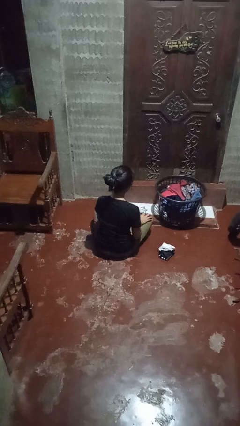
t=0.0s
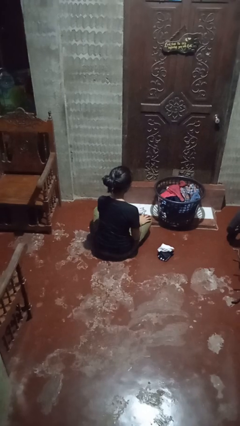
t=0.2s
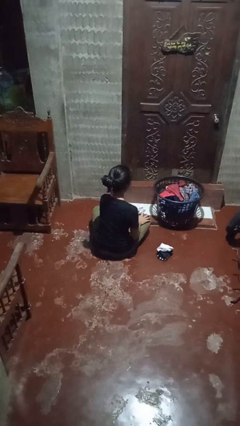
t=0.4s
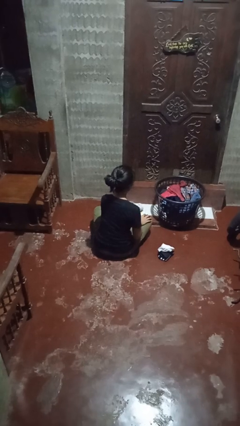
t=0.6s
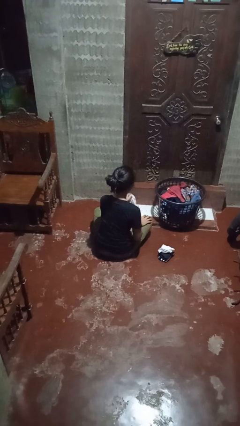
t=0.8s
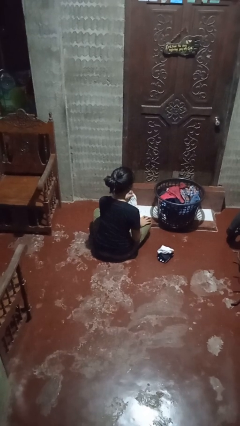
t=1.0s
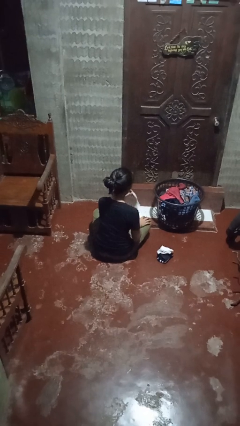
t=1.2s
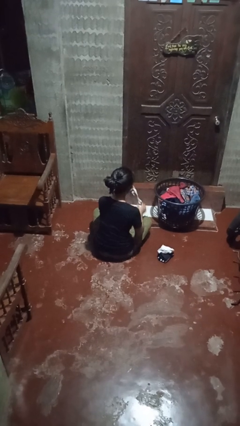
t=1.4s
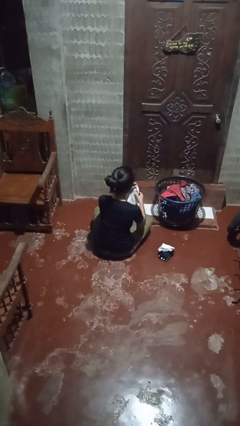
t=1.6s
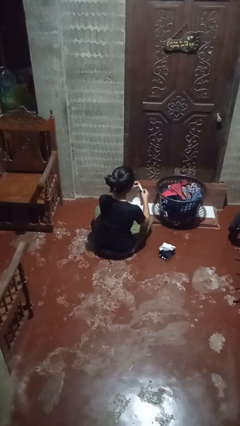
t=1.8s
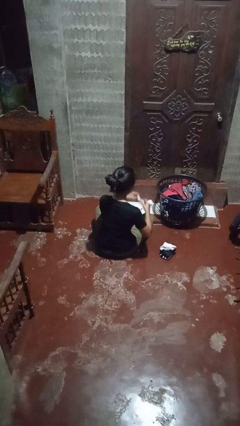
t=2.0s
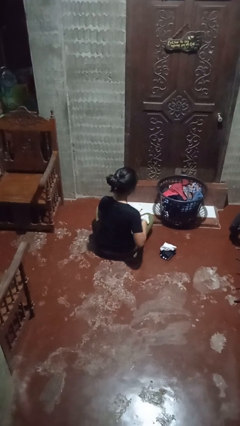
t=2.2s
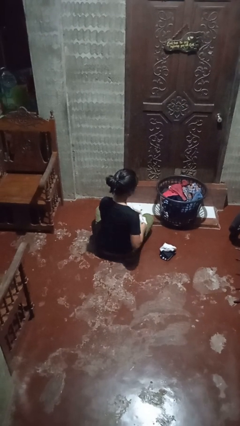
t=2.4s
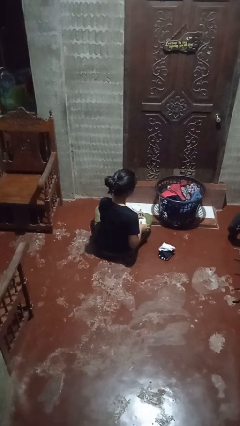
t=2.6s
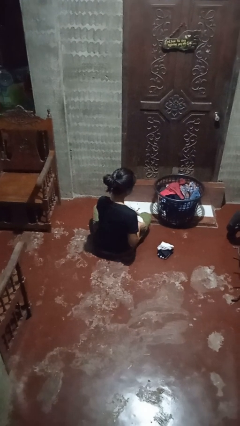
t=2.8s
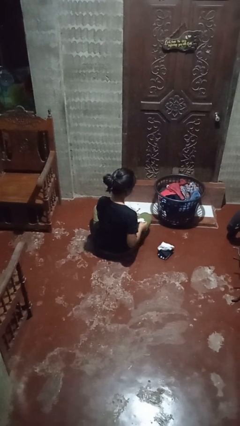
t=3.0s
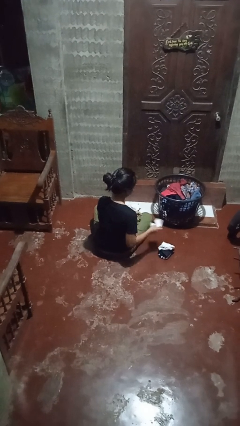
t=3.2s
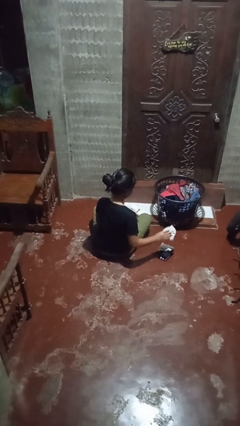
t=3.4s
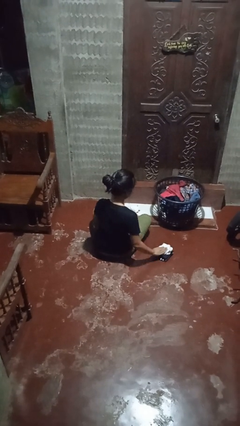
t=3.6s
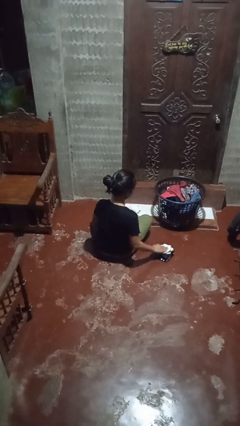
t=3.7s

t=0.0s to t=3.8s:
person folds socks

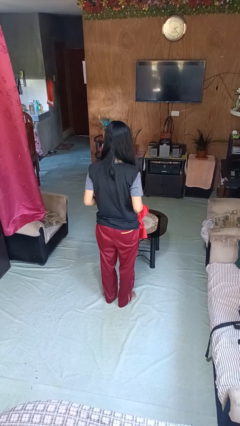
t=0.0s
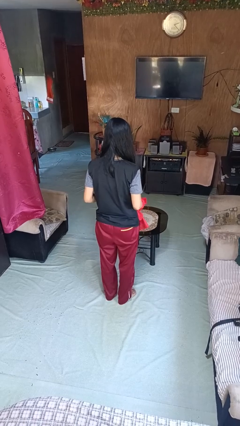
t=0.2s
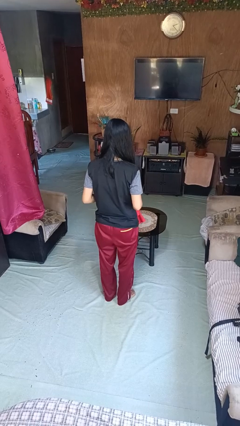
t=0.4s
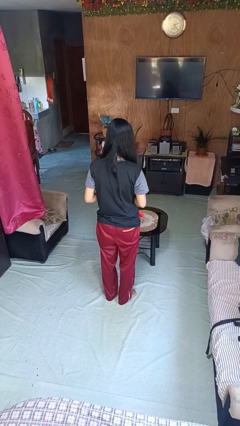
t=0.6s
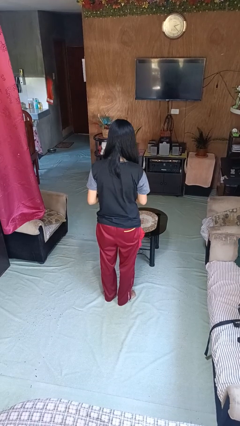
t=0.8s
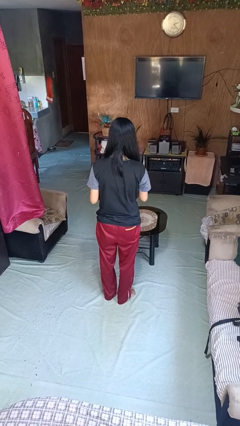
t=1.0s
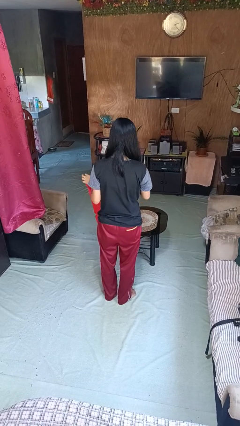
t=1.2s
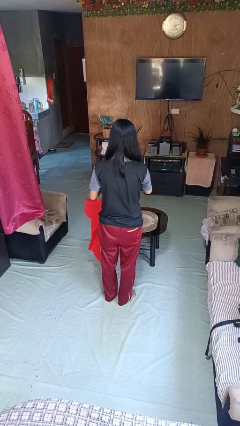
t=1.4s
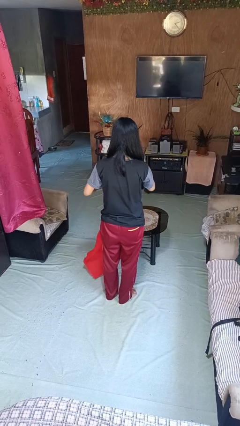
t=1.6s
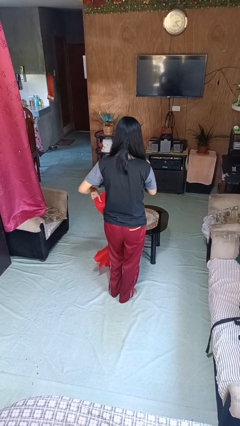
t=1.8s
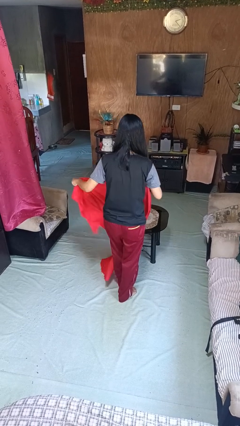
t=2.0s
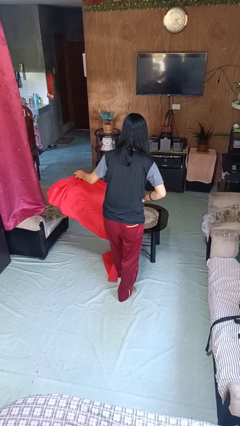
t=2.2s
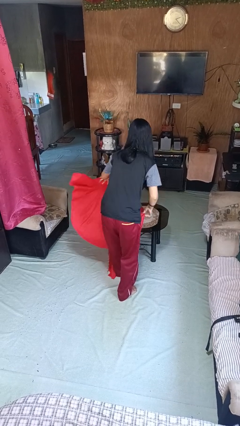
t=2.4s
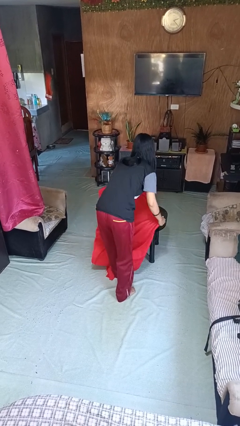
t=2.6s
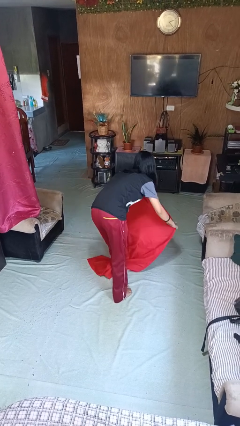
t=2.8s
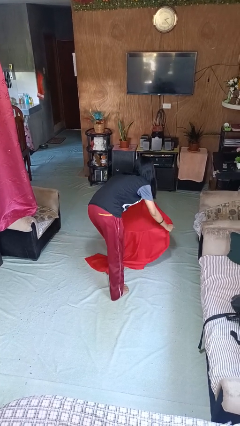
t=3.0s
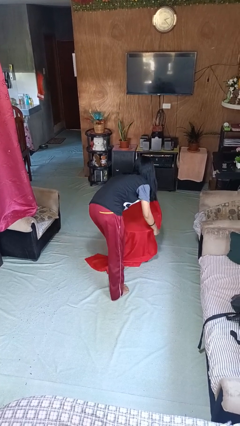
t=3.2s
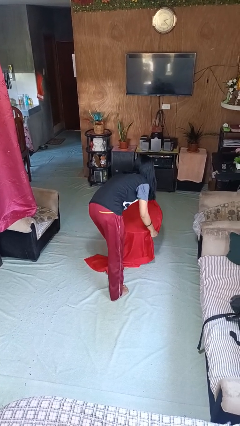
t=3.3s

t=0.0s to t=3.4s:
person spreads tablecloth

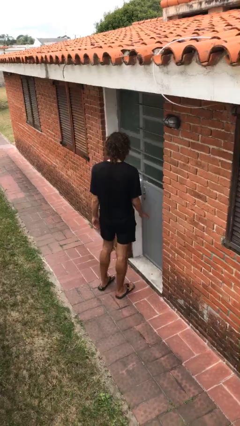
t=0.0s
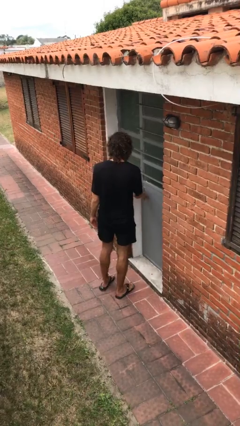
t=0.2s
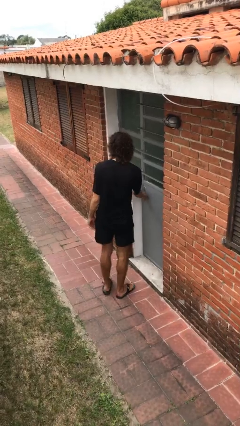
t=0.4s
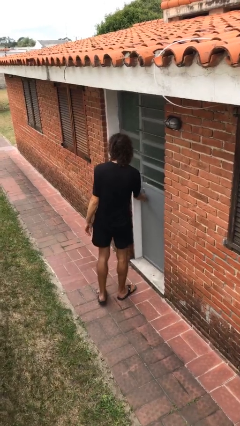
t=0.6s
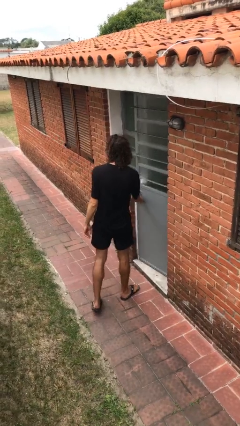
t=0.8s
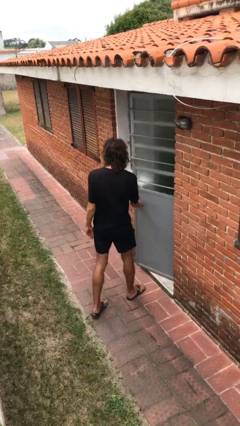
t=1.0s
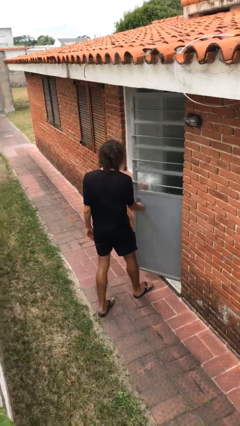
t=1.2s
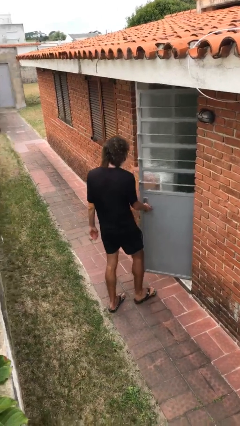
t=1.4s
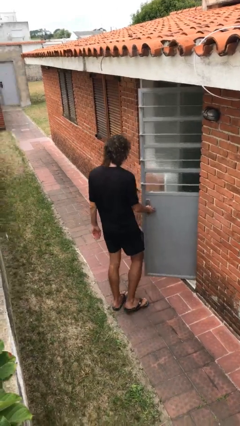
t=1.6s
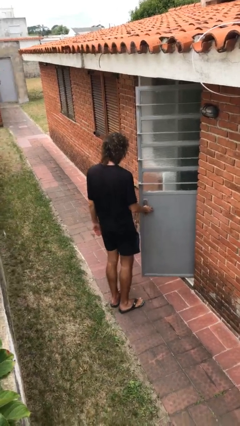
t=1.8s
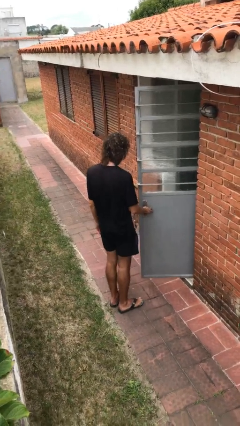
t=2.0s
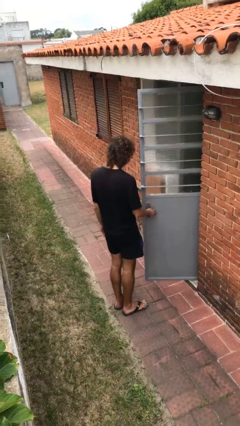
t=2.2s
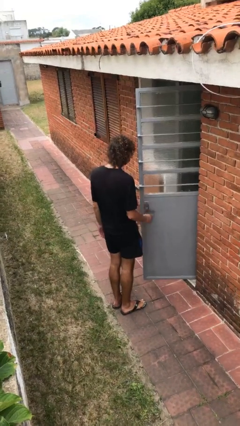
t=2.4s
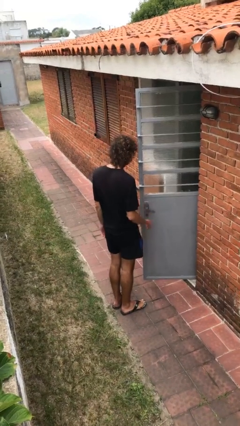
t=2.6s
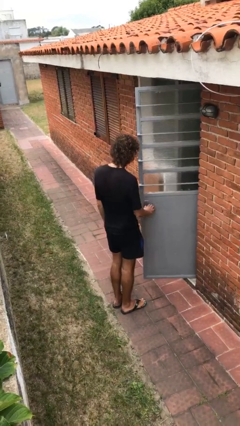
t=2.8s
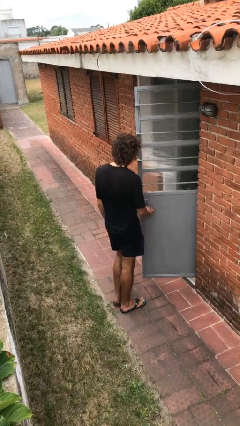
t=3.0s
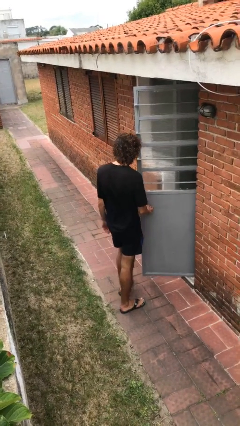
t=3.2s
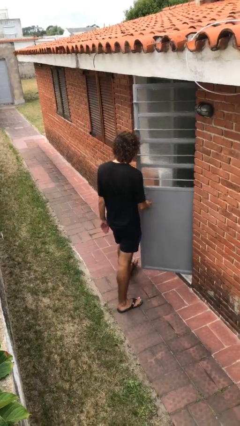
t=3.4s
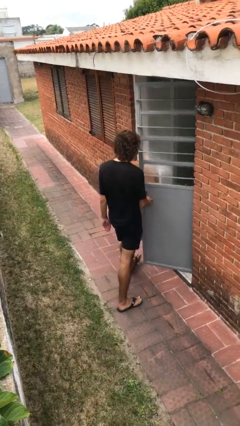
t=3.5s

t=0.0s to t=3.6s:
person opens facility door

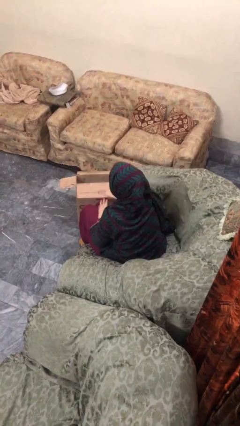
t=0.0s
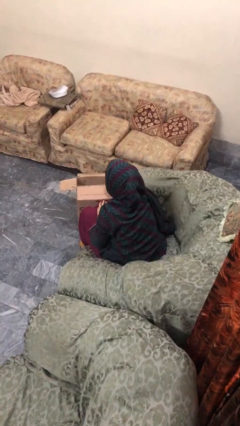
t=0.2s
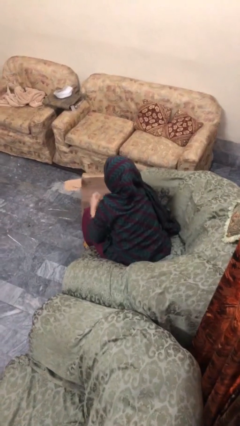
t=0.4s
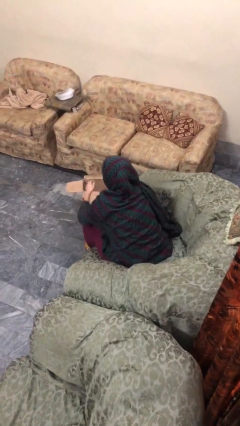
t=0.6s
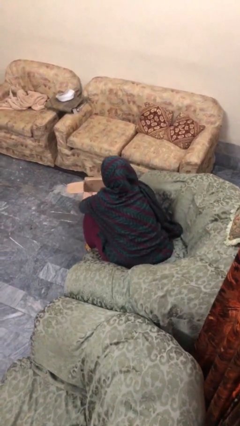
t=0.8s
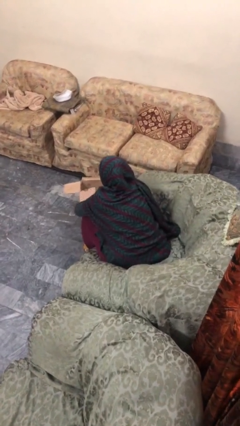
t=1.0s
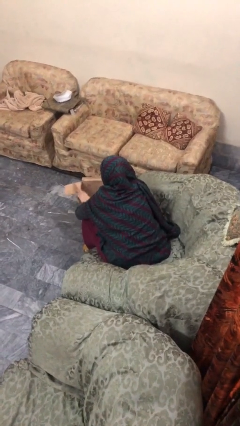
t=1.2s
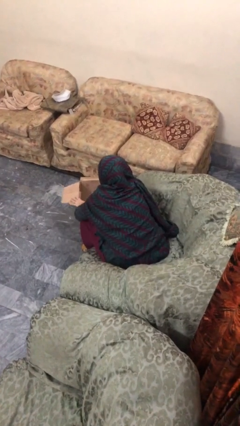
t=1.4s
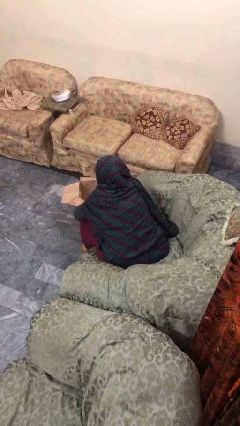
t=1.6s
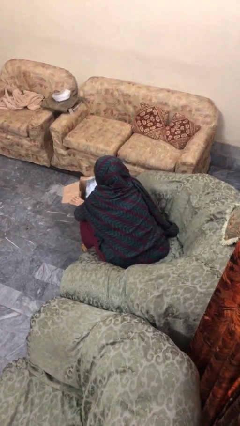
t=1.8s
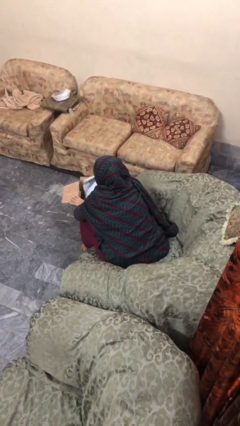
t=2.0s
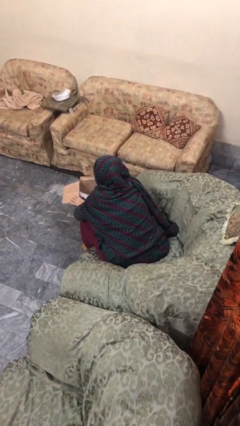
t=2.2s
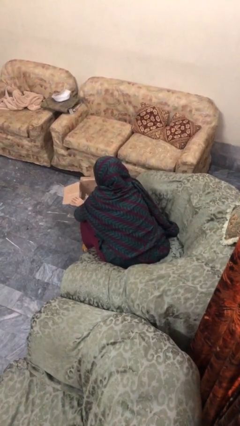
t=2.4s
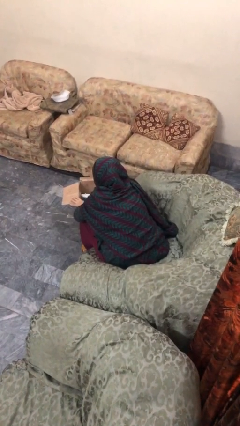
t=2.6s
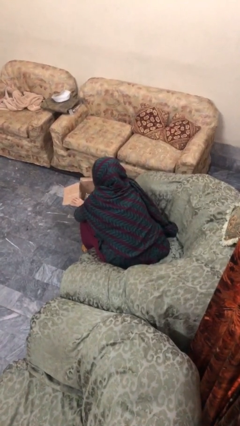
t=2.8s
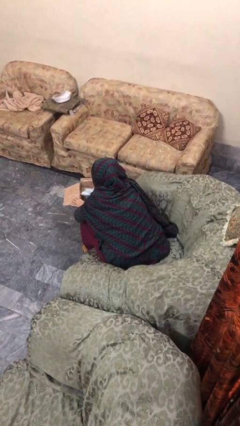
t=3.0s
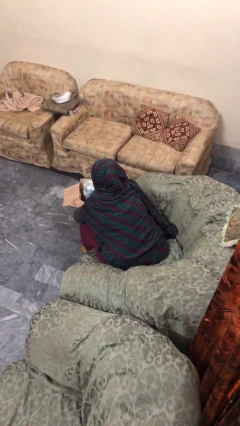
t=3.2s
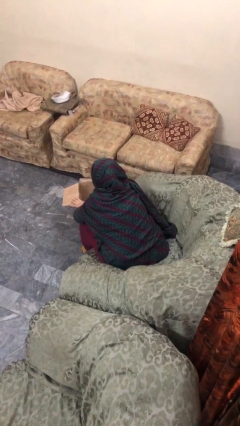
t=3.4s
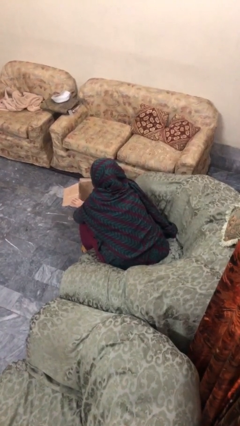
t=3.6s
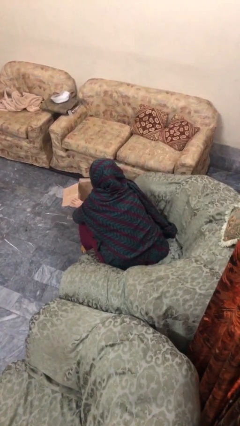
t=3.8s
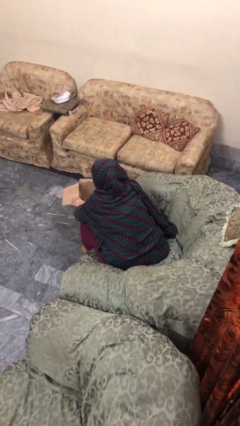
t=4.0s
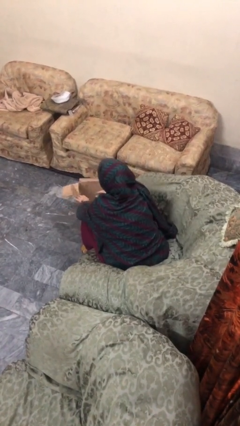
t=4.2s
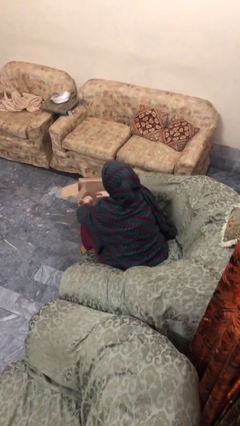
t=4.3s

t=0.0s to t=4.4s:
person searches in box

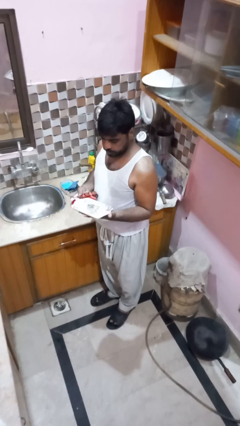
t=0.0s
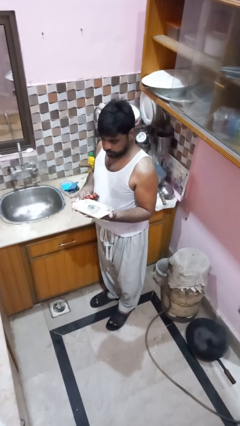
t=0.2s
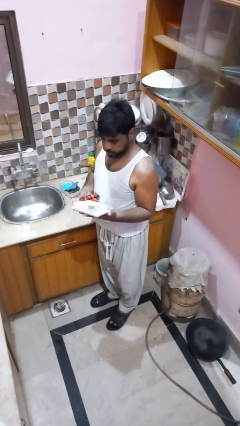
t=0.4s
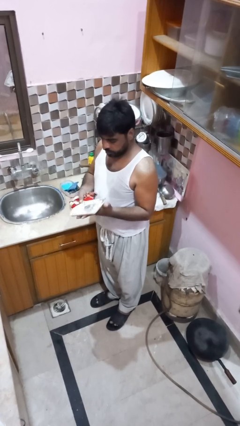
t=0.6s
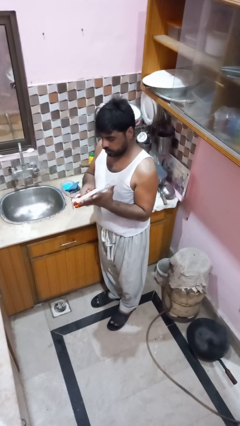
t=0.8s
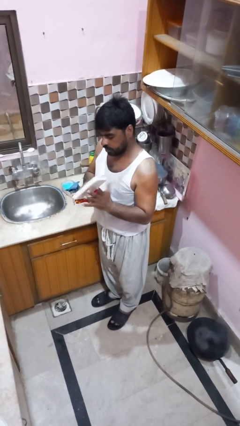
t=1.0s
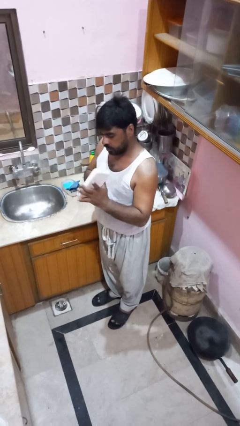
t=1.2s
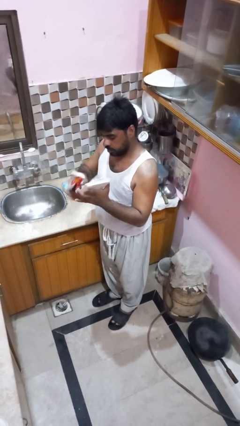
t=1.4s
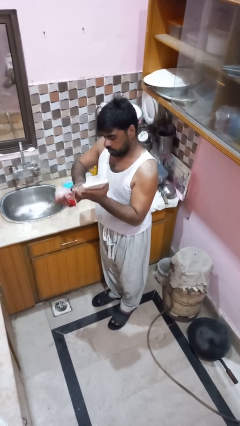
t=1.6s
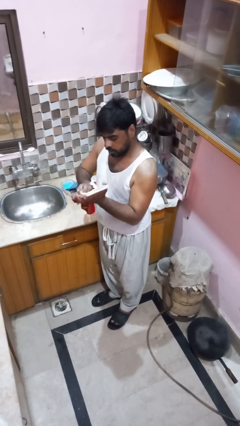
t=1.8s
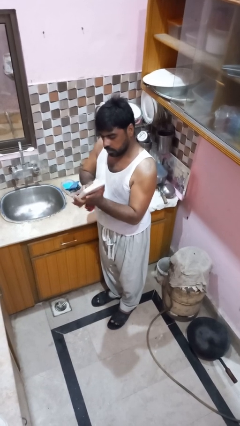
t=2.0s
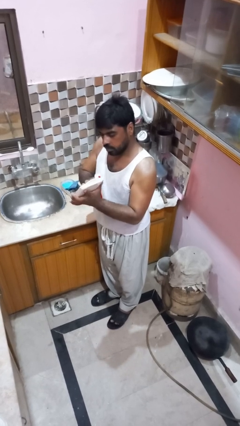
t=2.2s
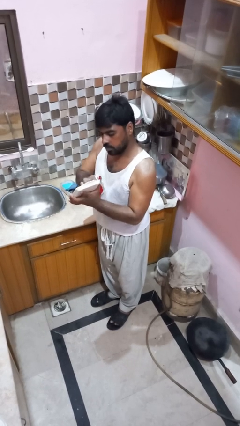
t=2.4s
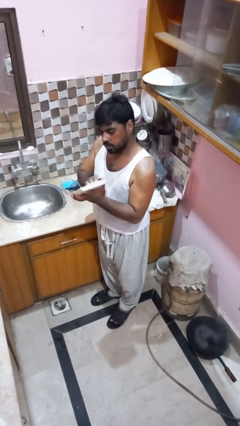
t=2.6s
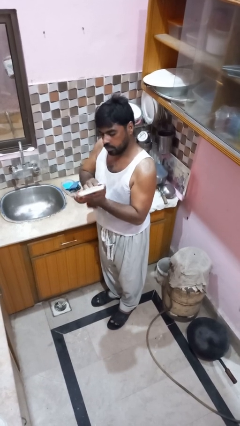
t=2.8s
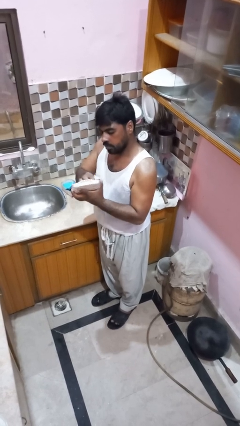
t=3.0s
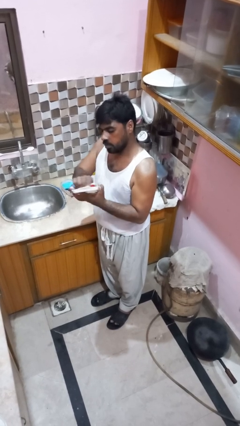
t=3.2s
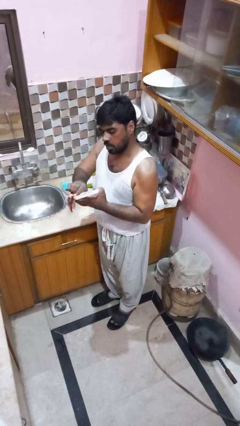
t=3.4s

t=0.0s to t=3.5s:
person dries dish
